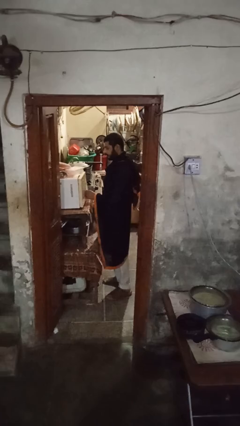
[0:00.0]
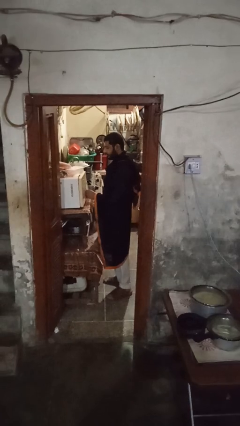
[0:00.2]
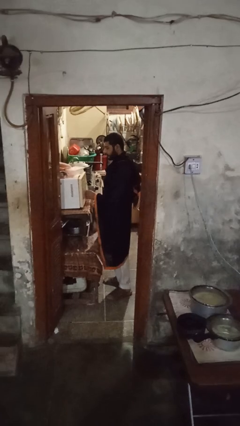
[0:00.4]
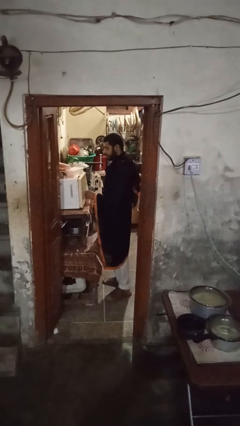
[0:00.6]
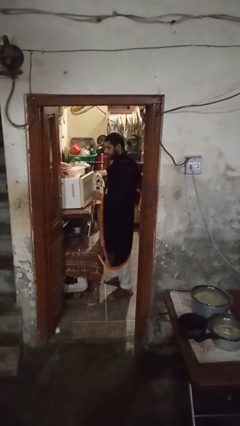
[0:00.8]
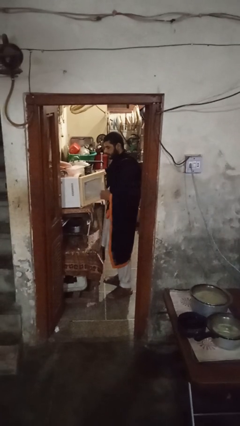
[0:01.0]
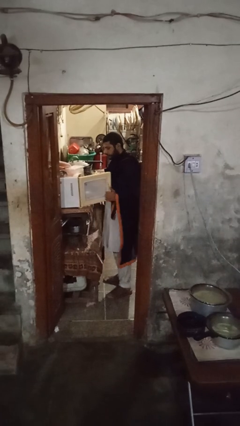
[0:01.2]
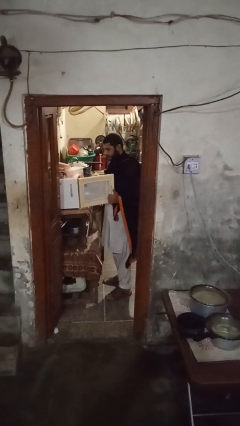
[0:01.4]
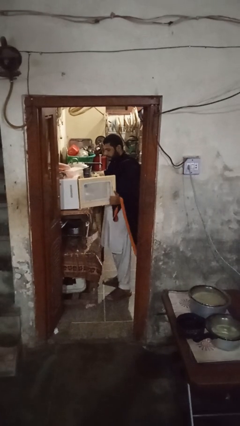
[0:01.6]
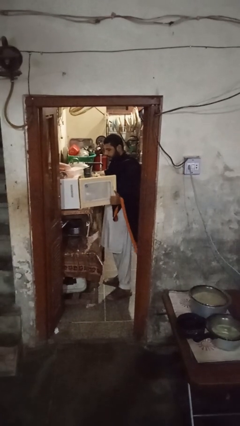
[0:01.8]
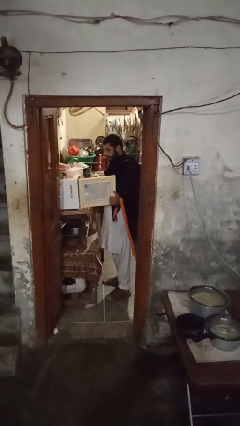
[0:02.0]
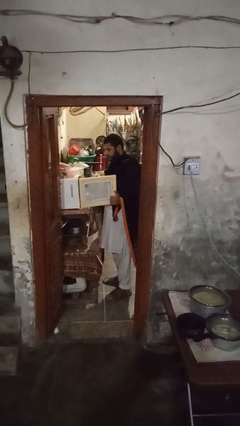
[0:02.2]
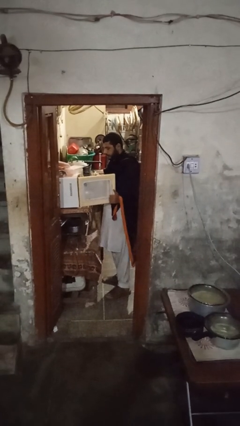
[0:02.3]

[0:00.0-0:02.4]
person opens microwave

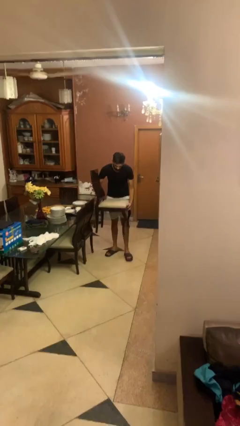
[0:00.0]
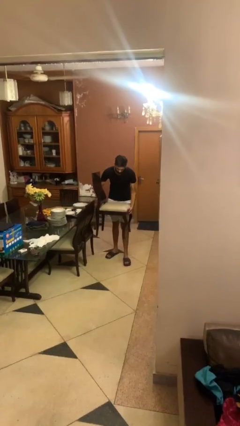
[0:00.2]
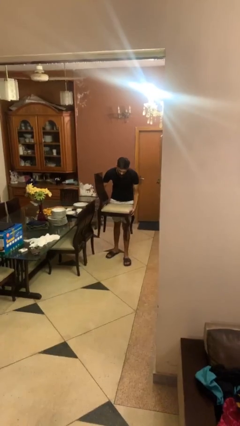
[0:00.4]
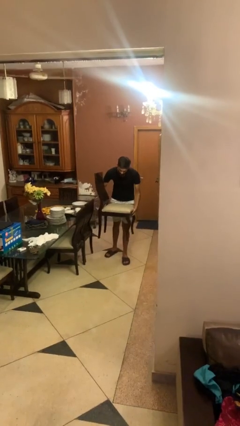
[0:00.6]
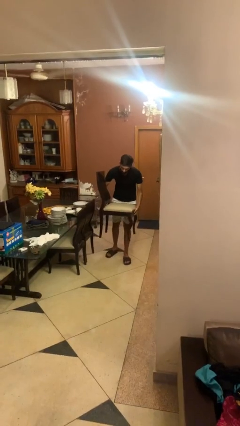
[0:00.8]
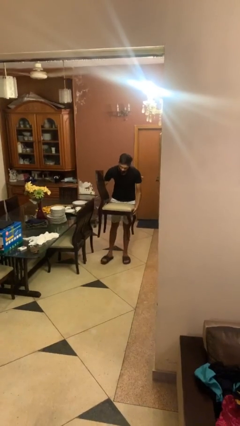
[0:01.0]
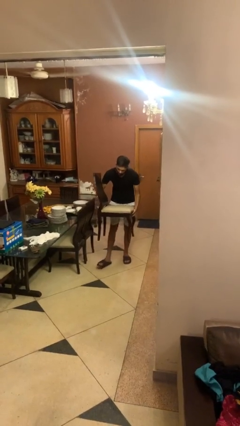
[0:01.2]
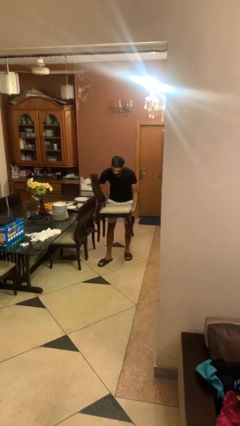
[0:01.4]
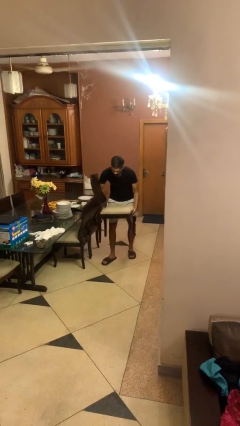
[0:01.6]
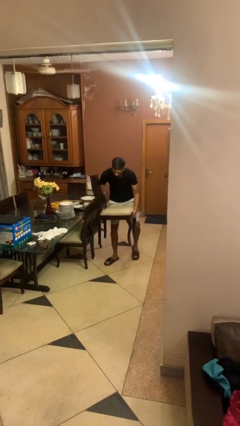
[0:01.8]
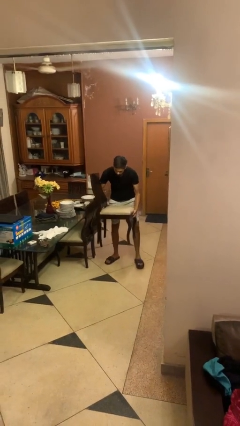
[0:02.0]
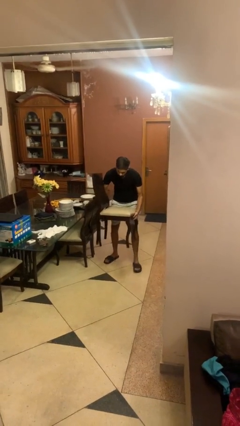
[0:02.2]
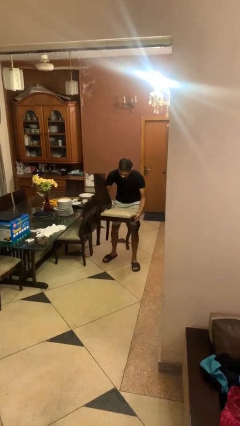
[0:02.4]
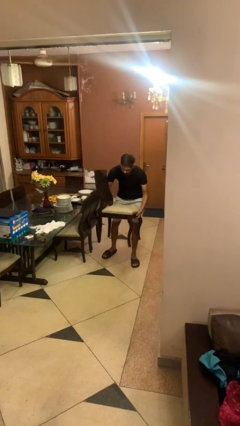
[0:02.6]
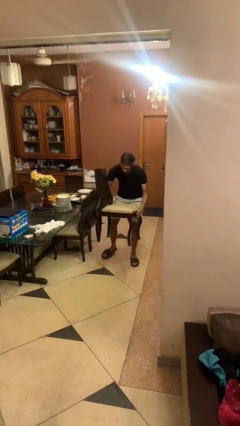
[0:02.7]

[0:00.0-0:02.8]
person carries heavy object

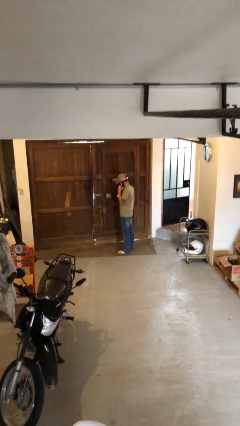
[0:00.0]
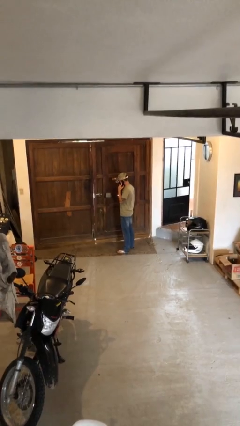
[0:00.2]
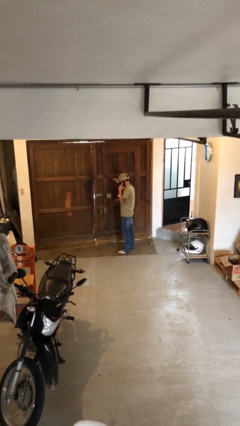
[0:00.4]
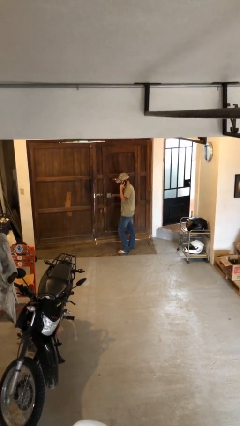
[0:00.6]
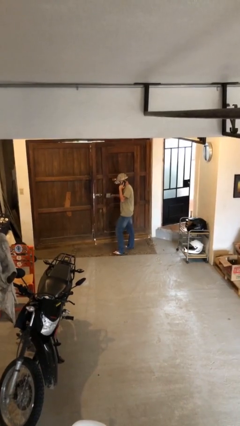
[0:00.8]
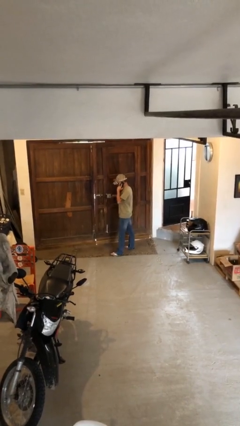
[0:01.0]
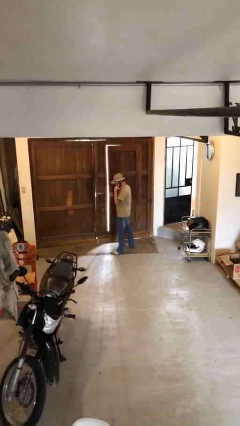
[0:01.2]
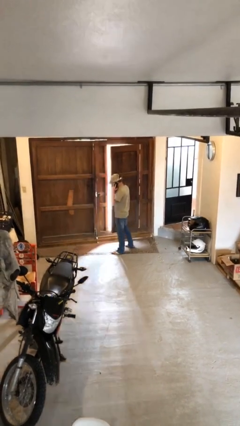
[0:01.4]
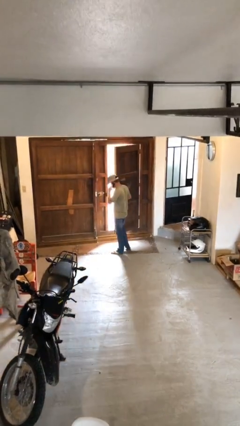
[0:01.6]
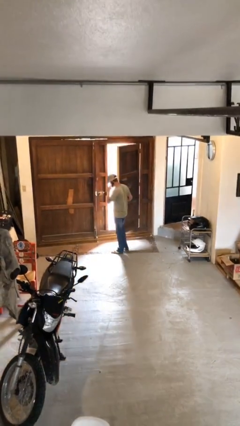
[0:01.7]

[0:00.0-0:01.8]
person opens facility door

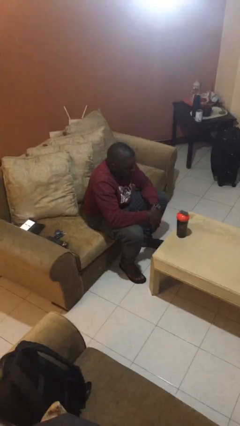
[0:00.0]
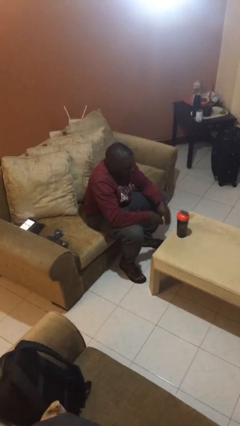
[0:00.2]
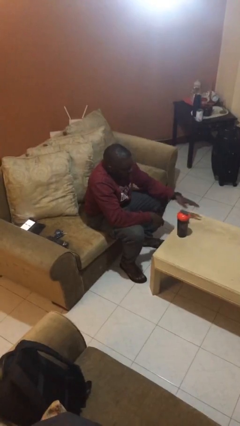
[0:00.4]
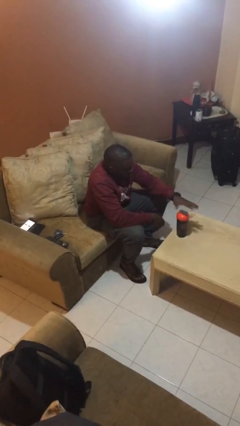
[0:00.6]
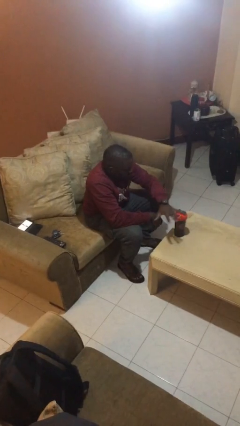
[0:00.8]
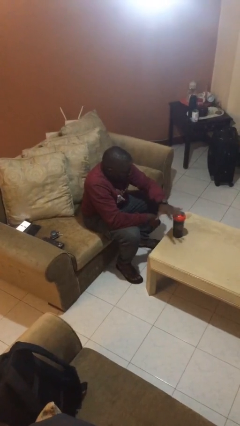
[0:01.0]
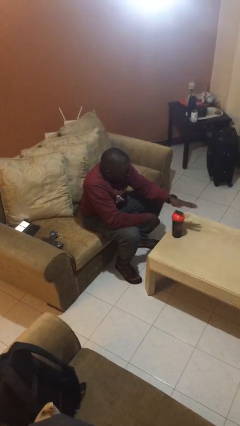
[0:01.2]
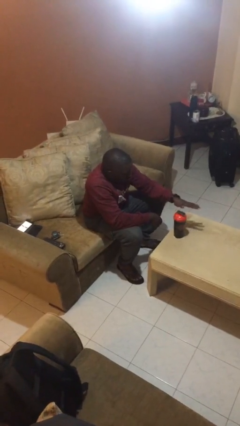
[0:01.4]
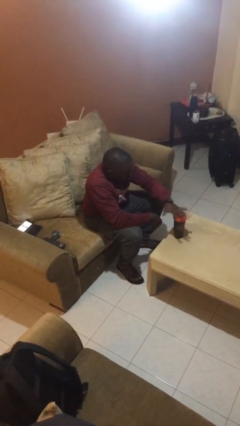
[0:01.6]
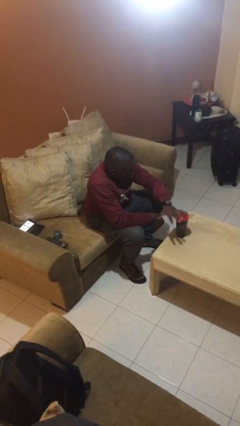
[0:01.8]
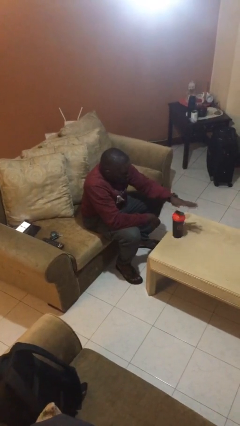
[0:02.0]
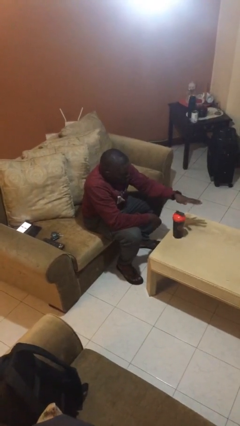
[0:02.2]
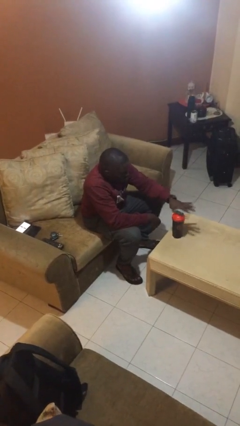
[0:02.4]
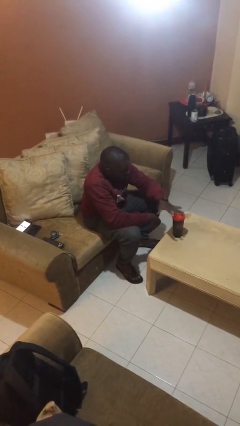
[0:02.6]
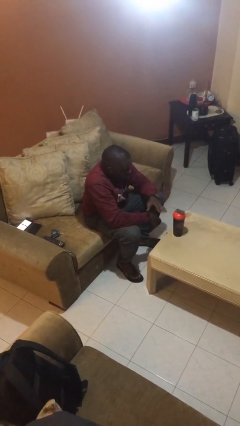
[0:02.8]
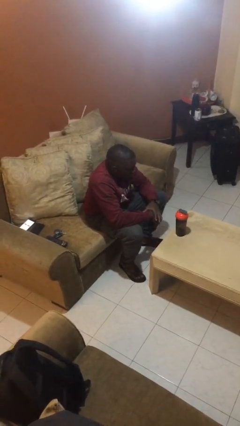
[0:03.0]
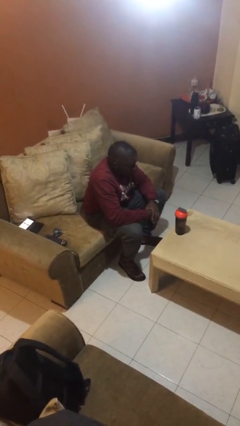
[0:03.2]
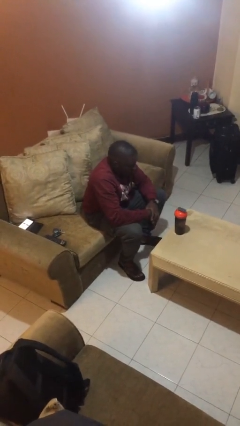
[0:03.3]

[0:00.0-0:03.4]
person waves hand over object

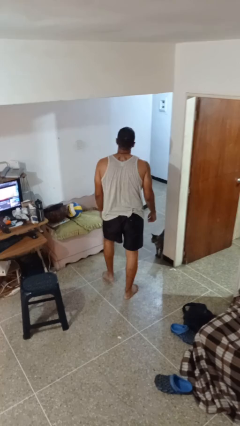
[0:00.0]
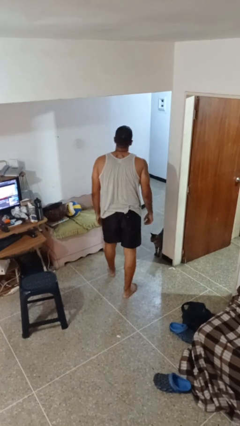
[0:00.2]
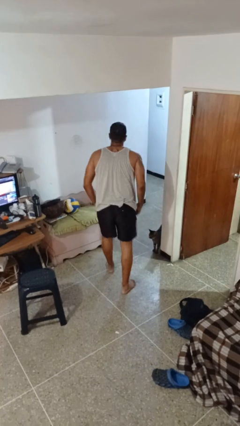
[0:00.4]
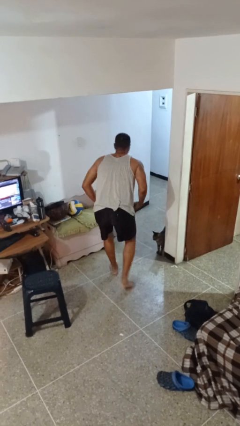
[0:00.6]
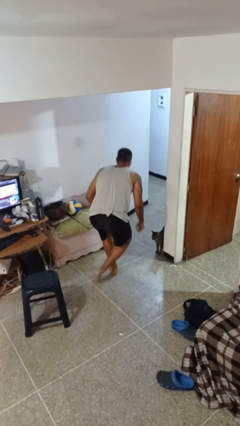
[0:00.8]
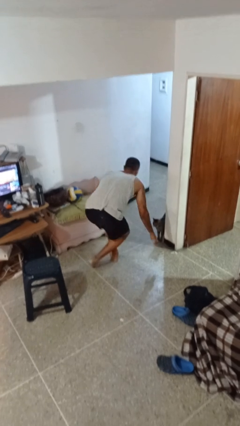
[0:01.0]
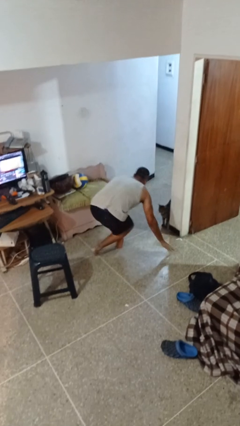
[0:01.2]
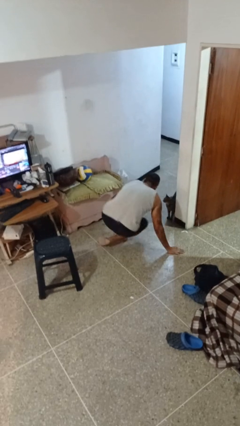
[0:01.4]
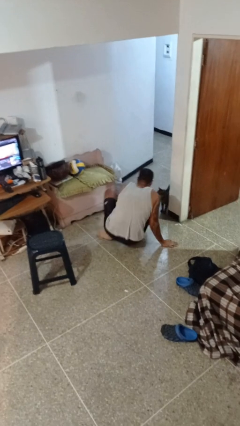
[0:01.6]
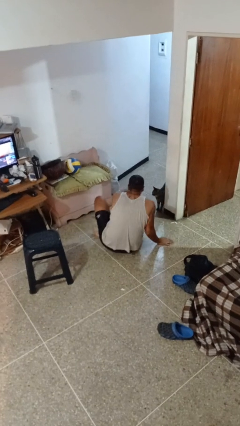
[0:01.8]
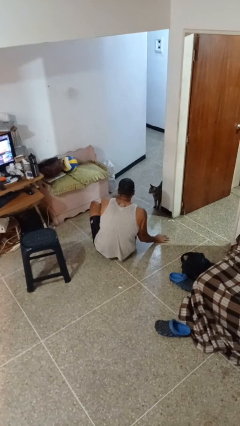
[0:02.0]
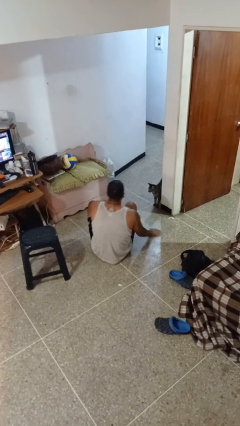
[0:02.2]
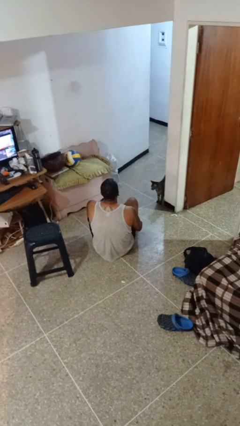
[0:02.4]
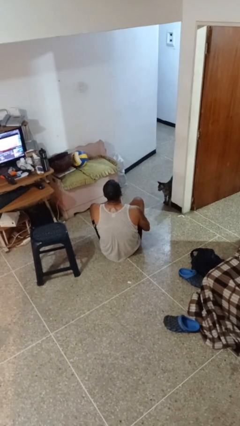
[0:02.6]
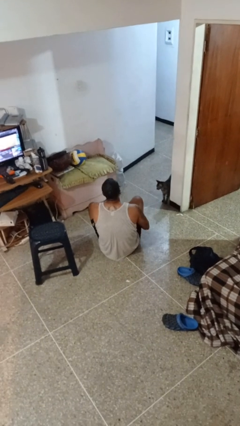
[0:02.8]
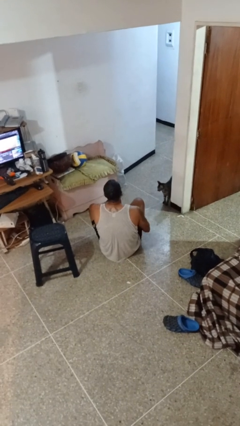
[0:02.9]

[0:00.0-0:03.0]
person sits crisscross

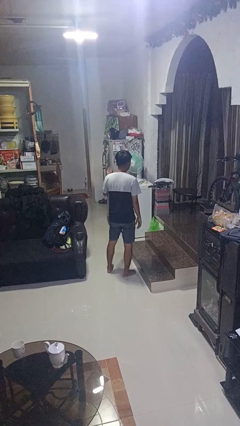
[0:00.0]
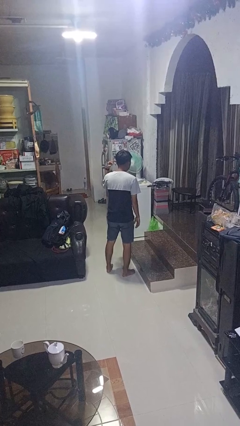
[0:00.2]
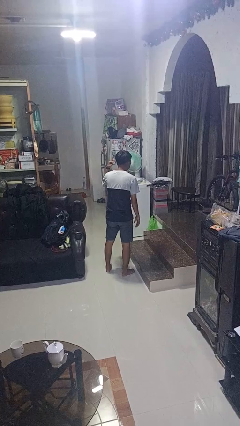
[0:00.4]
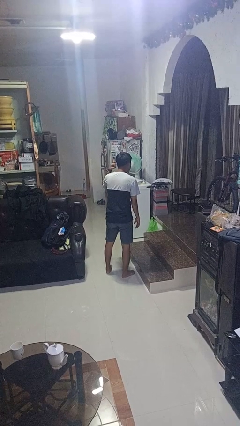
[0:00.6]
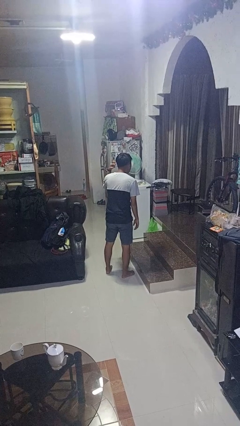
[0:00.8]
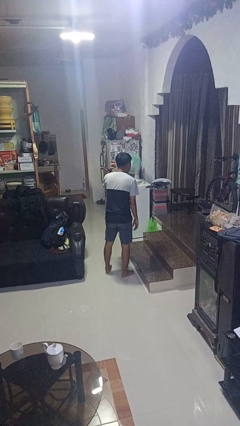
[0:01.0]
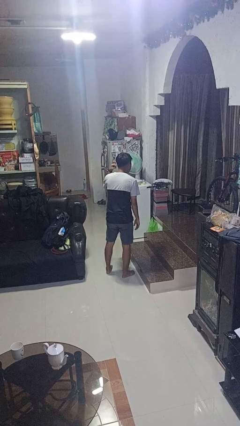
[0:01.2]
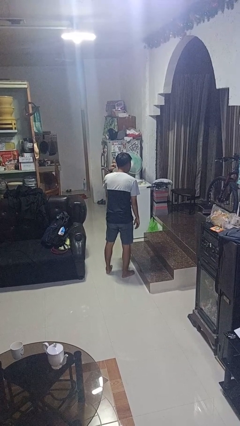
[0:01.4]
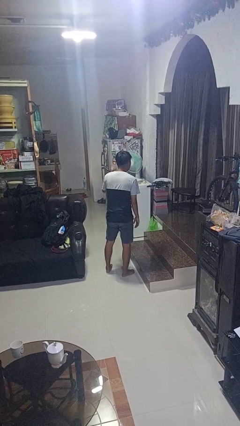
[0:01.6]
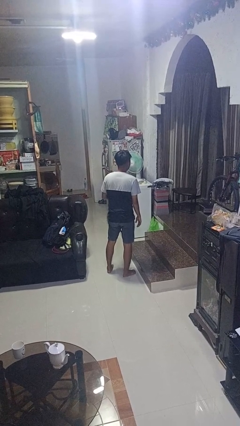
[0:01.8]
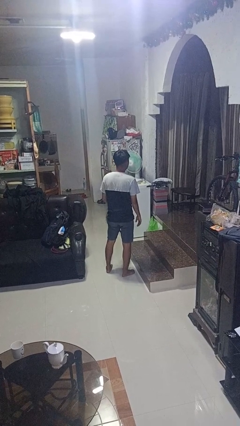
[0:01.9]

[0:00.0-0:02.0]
person gestures listen closely

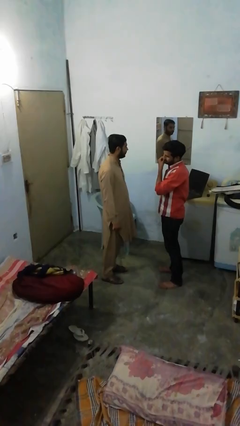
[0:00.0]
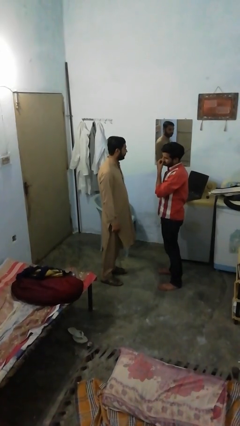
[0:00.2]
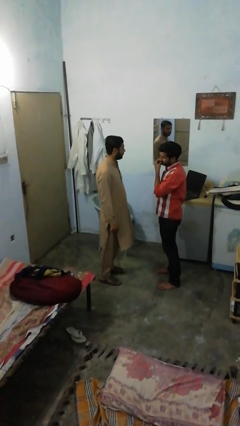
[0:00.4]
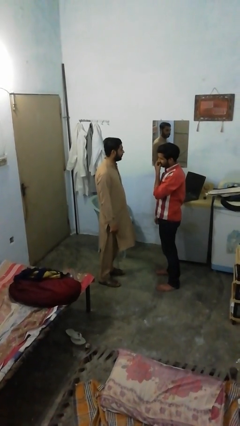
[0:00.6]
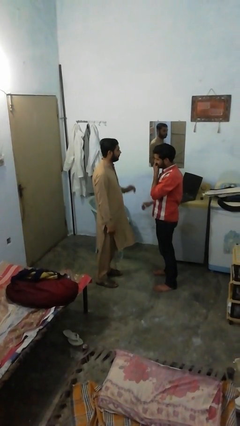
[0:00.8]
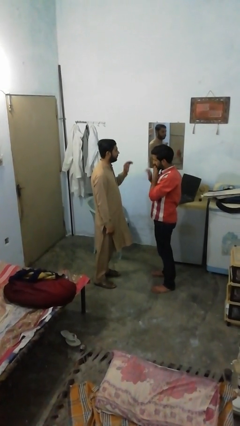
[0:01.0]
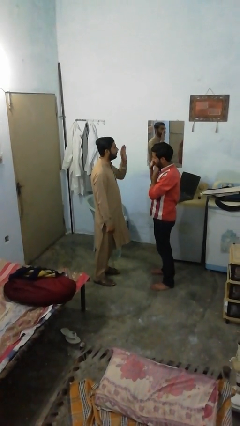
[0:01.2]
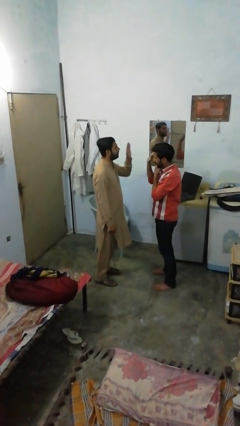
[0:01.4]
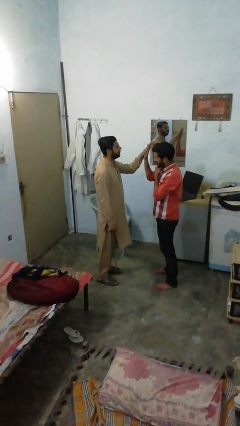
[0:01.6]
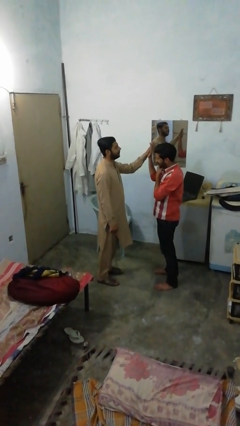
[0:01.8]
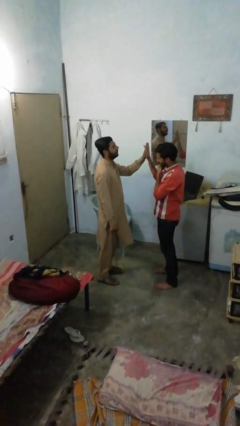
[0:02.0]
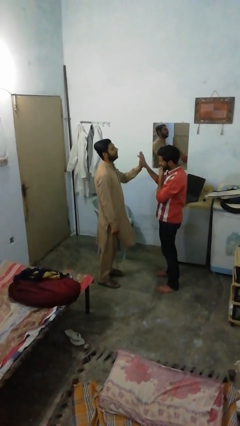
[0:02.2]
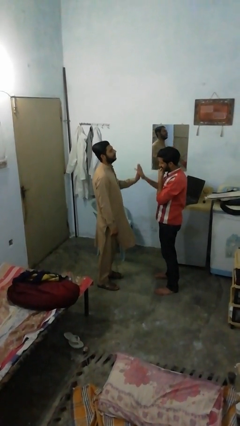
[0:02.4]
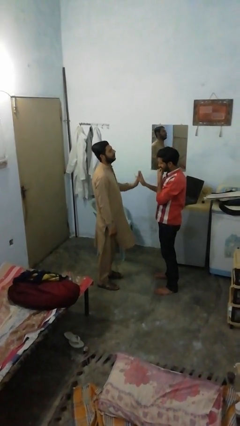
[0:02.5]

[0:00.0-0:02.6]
person highfives hand
